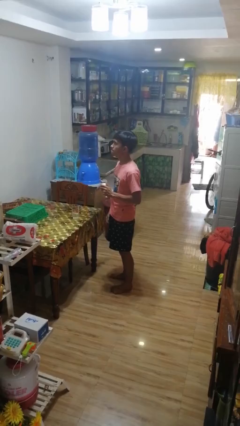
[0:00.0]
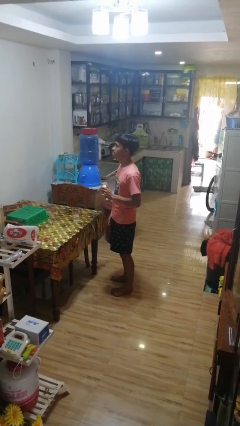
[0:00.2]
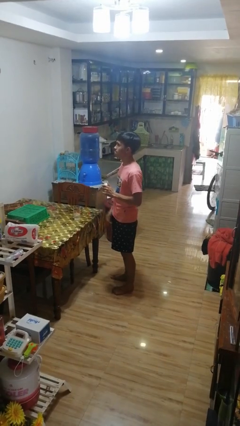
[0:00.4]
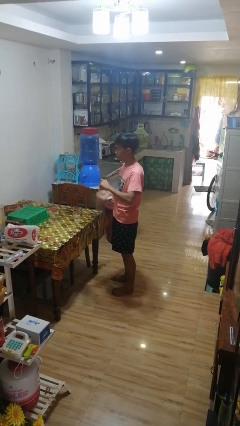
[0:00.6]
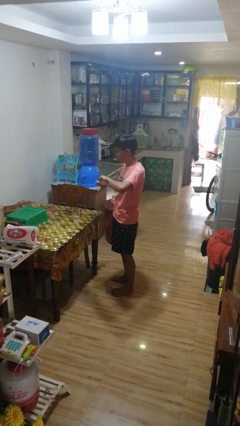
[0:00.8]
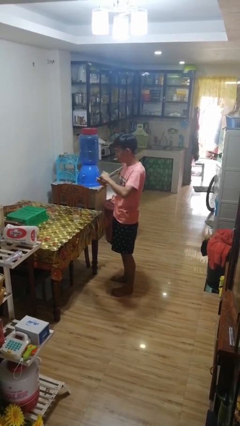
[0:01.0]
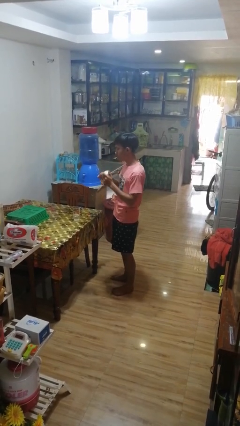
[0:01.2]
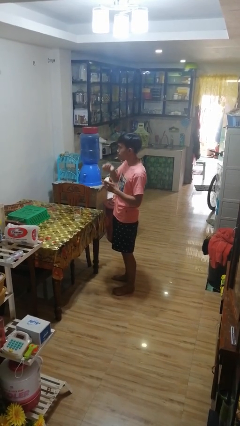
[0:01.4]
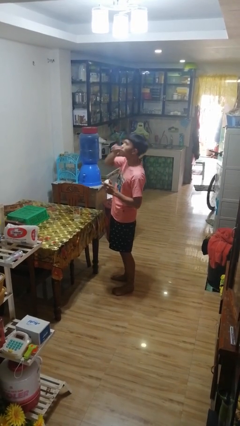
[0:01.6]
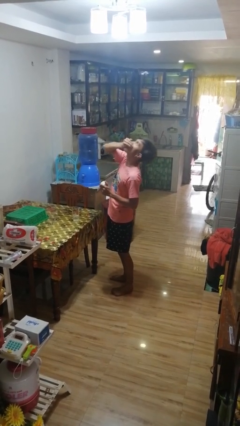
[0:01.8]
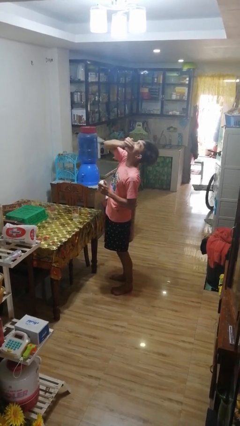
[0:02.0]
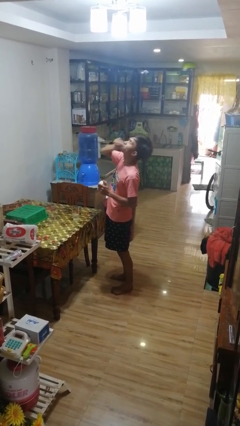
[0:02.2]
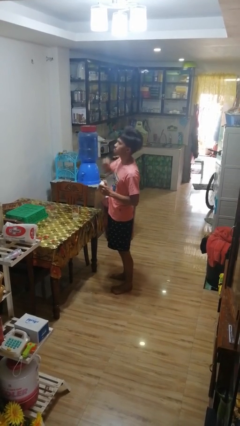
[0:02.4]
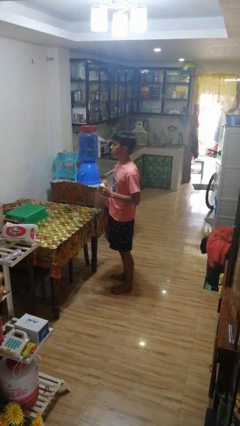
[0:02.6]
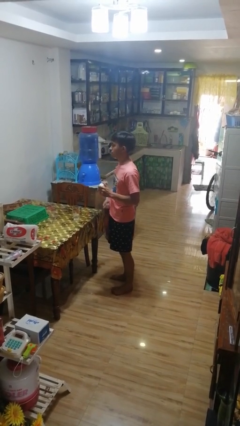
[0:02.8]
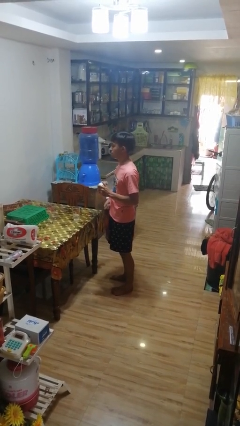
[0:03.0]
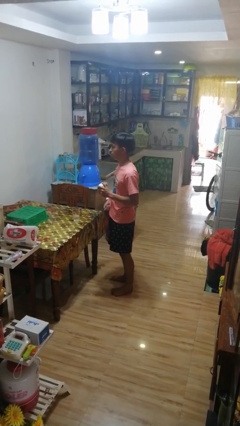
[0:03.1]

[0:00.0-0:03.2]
person takes medicine pills

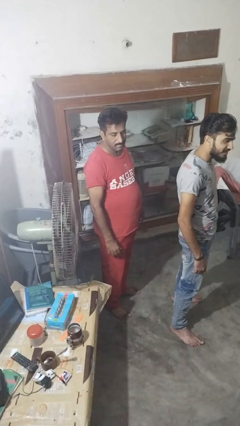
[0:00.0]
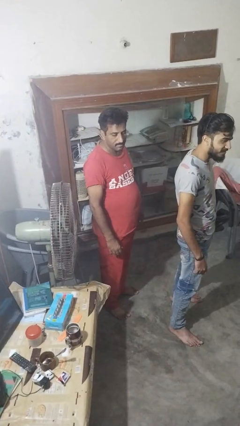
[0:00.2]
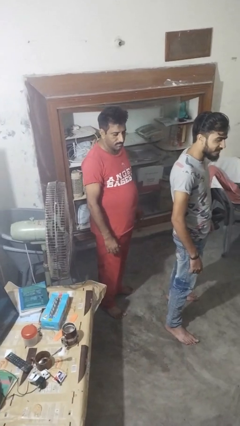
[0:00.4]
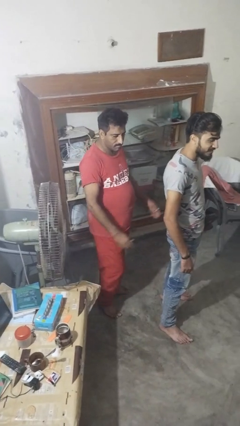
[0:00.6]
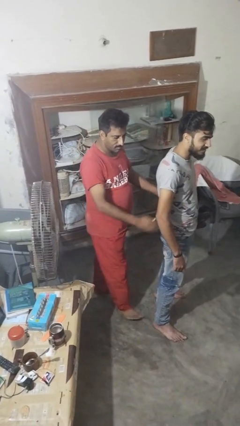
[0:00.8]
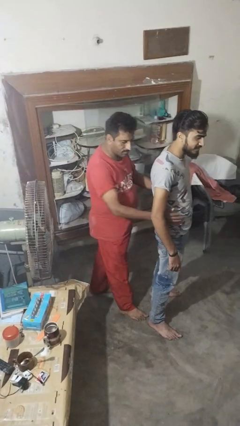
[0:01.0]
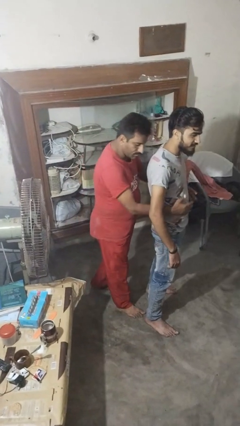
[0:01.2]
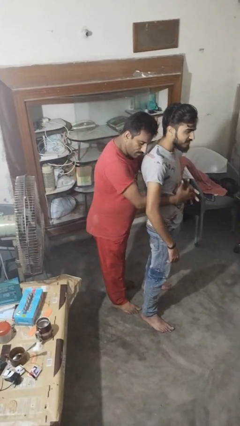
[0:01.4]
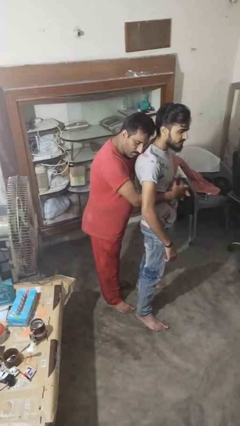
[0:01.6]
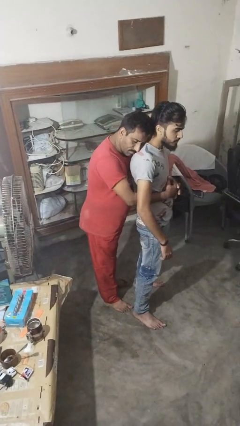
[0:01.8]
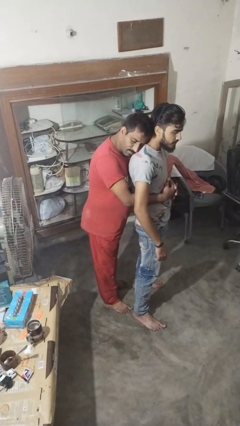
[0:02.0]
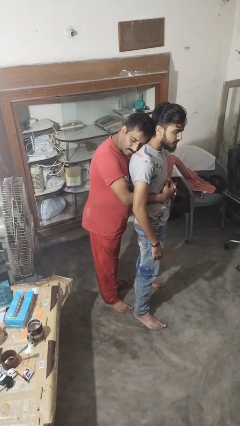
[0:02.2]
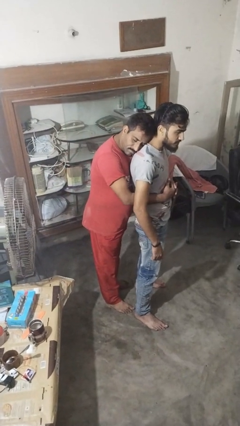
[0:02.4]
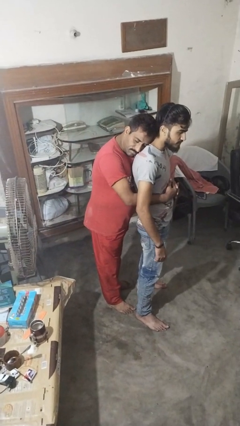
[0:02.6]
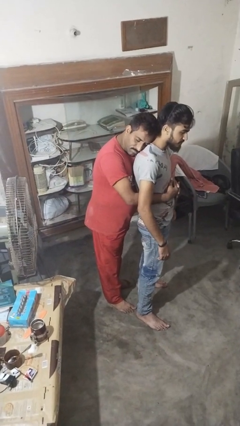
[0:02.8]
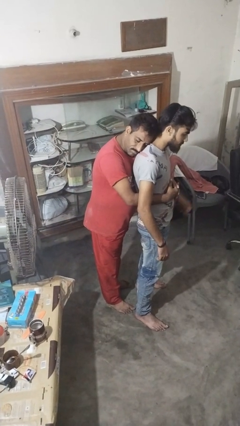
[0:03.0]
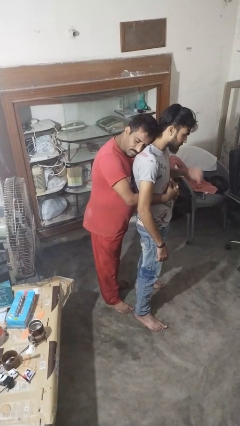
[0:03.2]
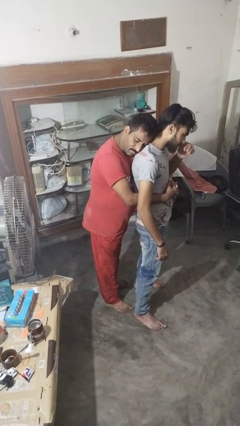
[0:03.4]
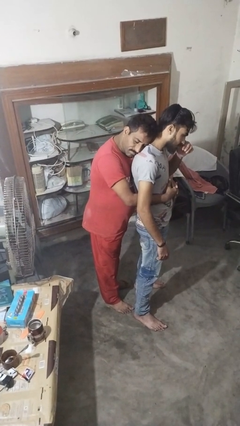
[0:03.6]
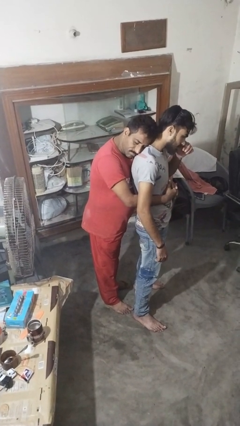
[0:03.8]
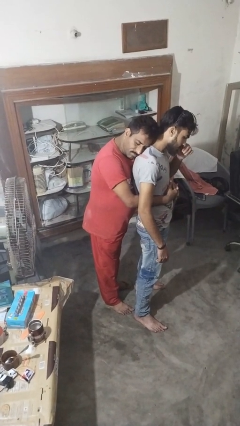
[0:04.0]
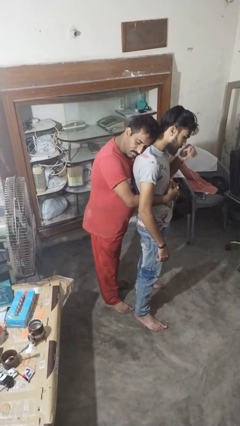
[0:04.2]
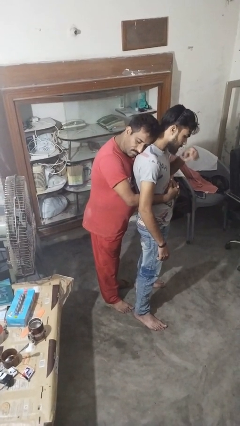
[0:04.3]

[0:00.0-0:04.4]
person hugs person from behind

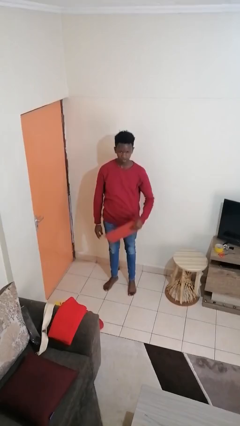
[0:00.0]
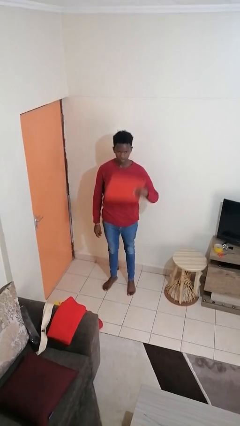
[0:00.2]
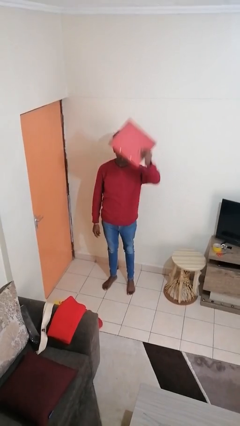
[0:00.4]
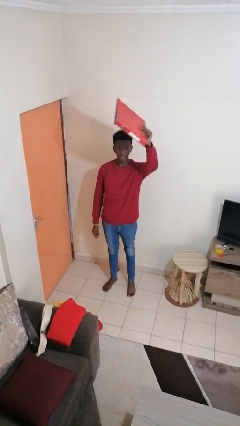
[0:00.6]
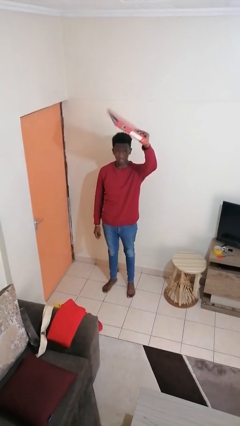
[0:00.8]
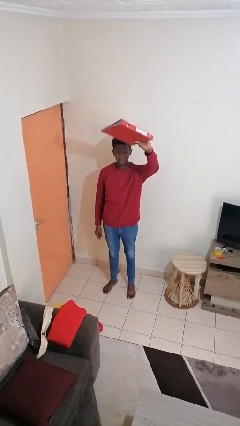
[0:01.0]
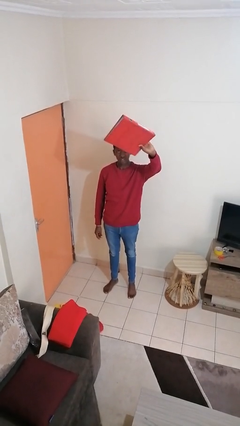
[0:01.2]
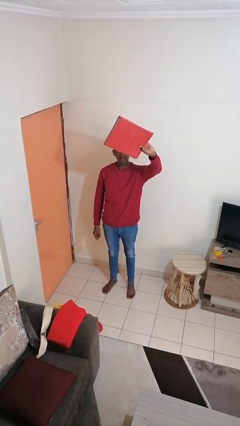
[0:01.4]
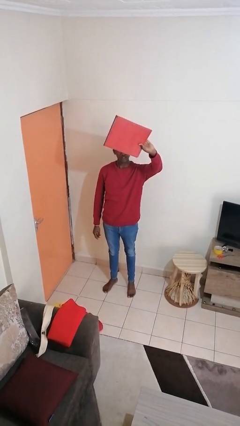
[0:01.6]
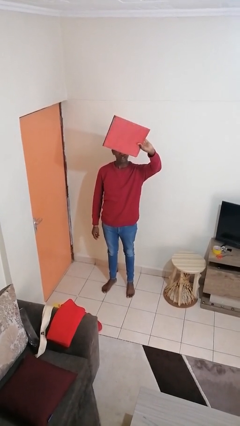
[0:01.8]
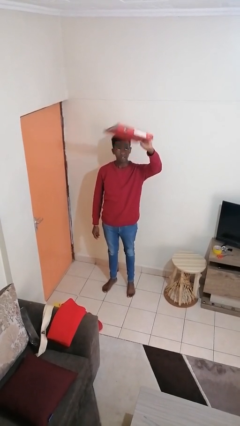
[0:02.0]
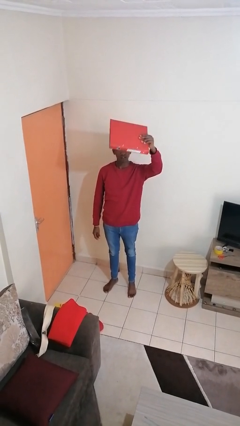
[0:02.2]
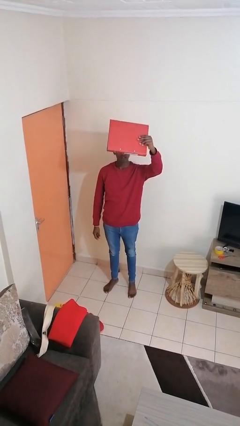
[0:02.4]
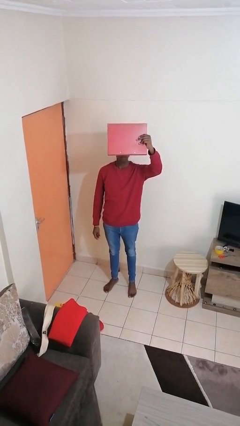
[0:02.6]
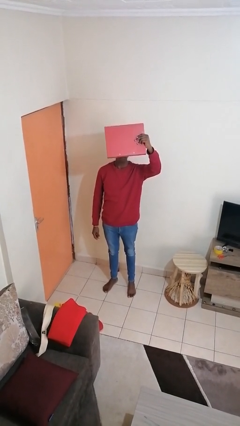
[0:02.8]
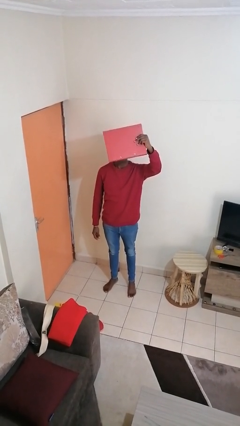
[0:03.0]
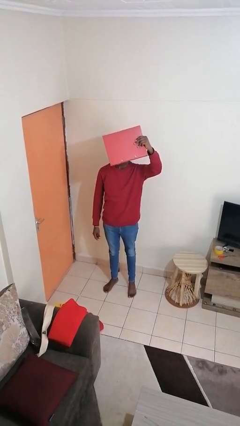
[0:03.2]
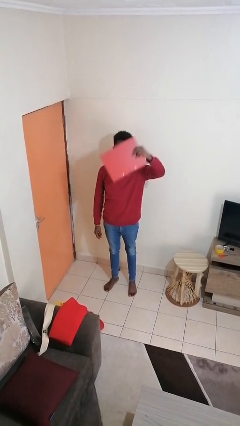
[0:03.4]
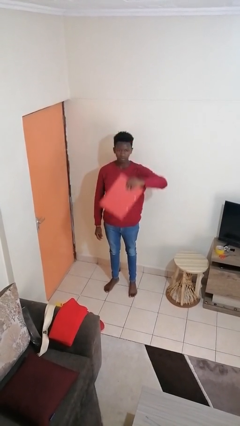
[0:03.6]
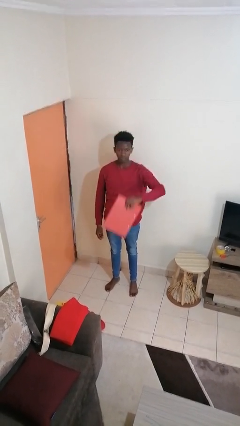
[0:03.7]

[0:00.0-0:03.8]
person holds object above head

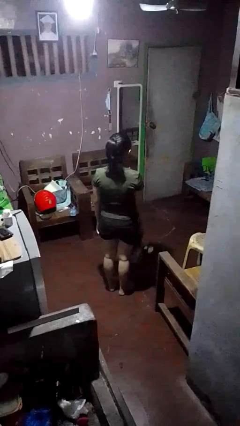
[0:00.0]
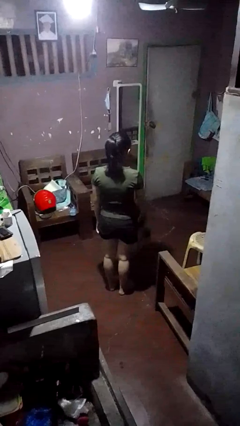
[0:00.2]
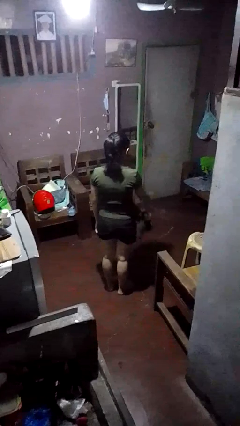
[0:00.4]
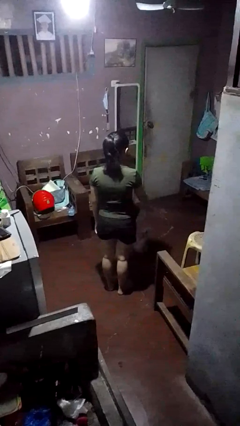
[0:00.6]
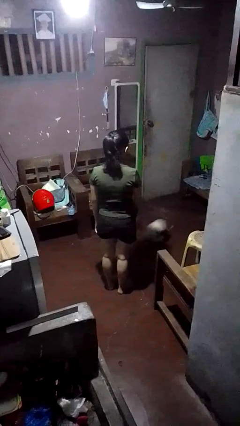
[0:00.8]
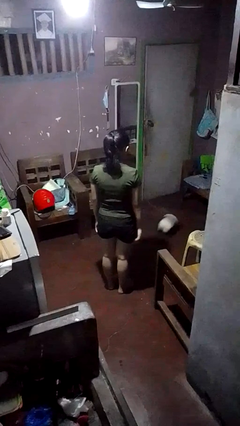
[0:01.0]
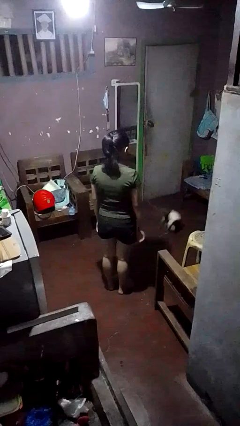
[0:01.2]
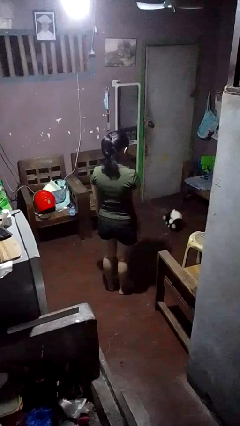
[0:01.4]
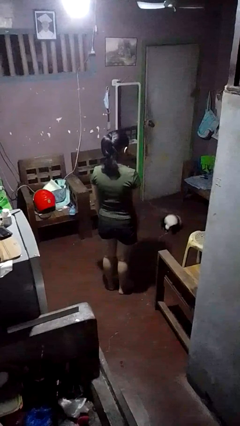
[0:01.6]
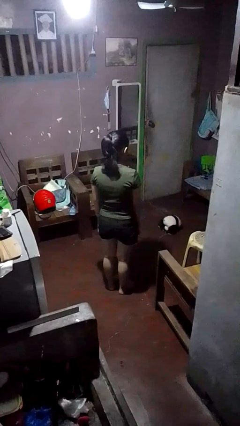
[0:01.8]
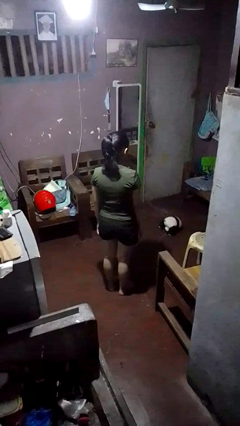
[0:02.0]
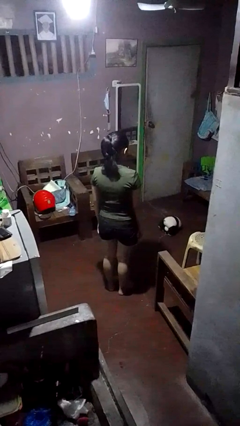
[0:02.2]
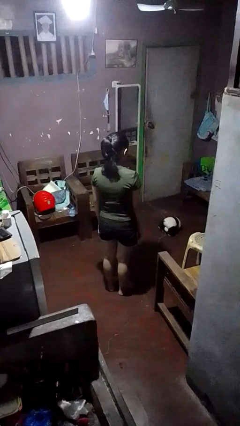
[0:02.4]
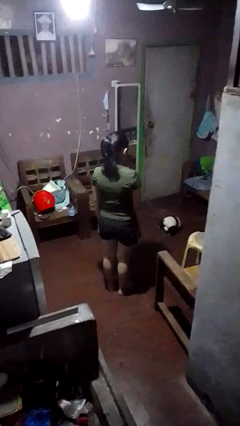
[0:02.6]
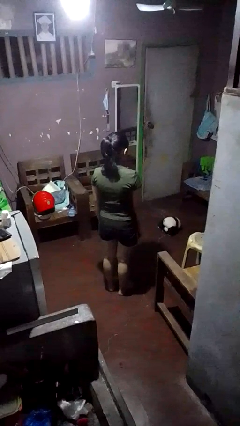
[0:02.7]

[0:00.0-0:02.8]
person throws object to ground

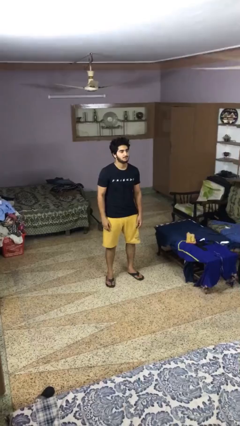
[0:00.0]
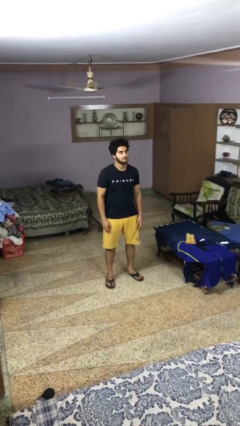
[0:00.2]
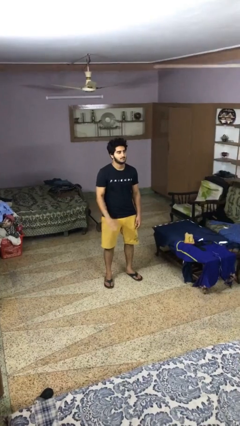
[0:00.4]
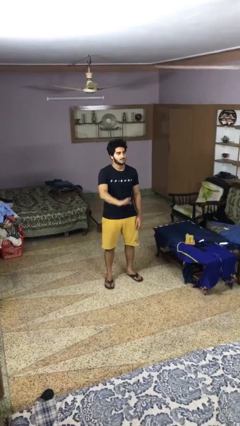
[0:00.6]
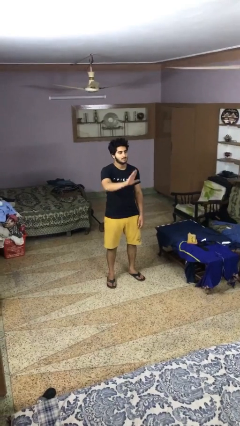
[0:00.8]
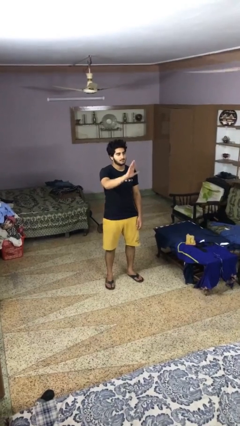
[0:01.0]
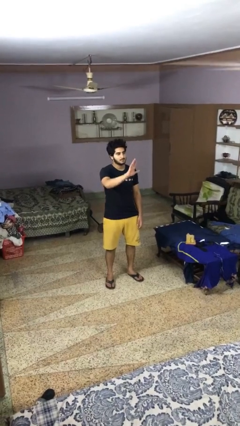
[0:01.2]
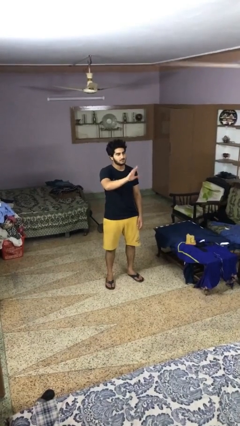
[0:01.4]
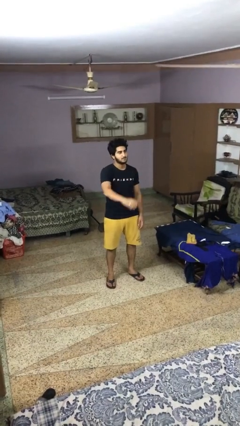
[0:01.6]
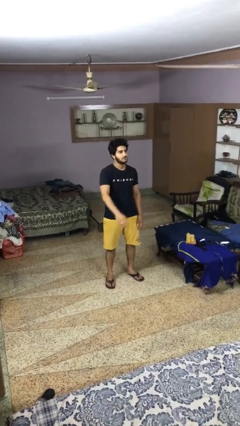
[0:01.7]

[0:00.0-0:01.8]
person gestures stop

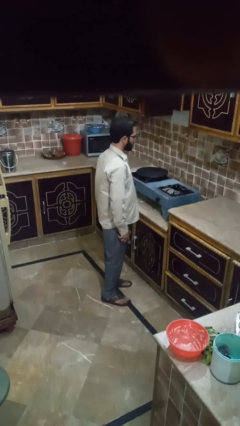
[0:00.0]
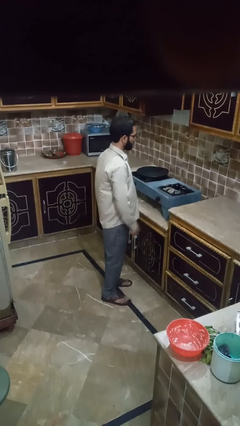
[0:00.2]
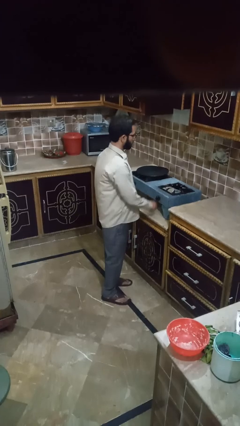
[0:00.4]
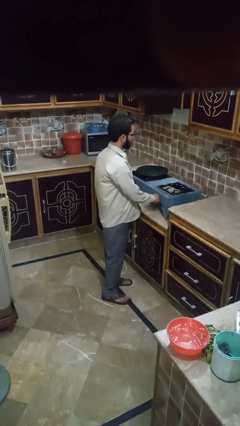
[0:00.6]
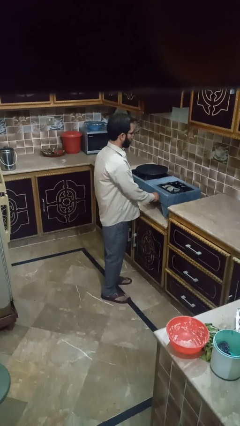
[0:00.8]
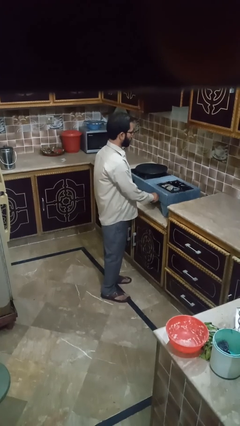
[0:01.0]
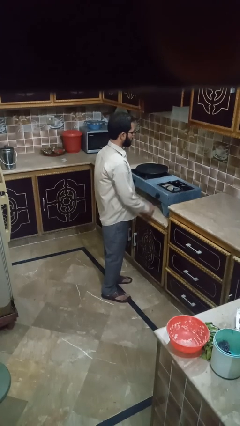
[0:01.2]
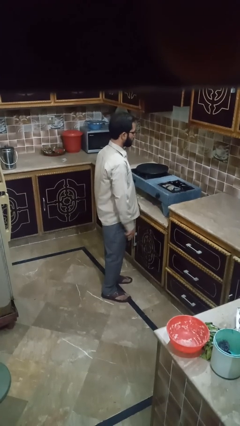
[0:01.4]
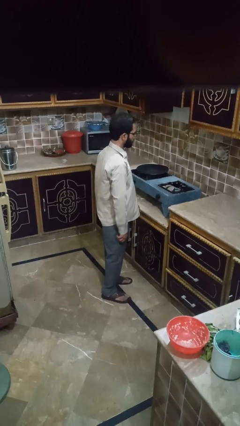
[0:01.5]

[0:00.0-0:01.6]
person turns off stovetop
